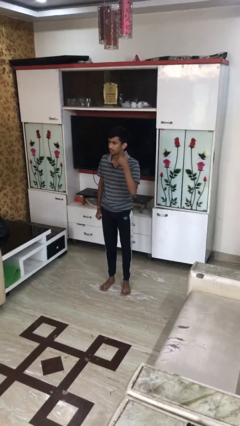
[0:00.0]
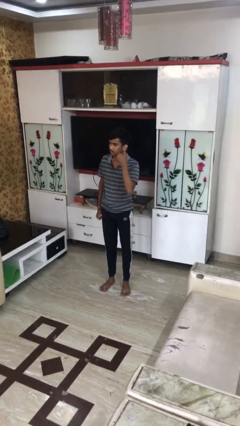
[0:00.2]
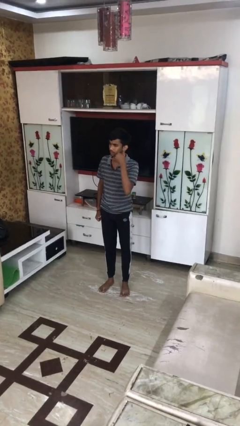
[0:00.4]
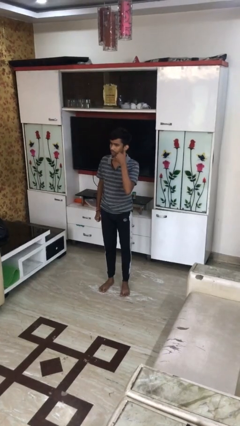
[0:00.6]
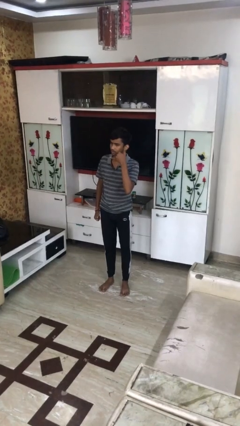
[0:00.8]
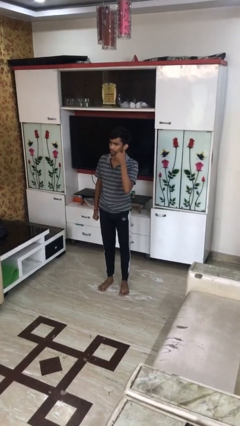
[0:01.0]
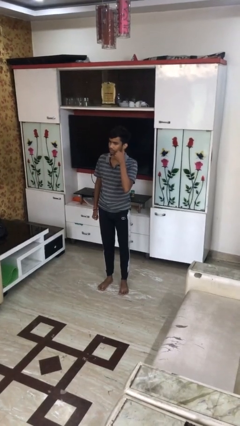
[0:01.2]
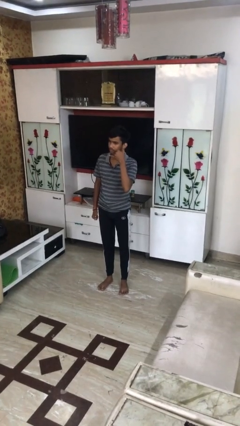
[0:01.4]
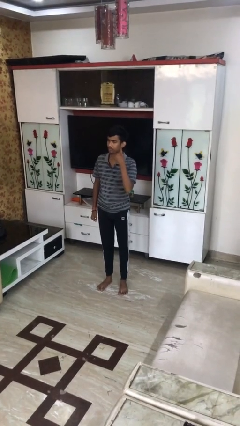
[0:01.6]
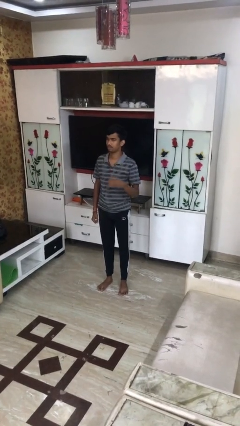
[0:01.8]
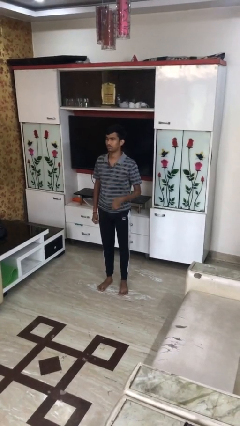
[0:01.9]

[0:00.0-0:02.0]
person gestures call me

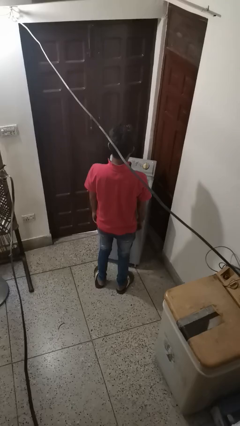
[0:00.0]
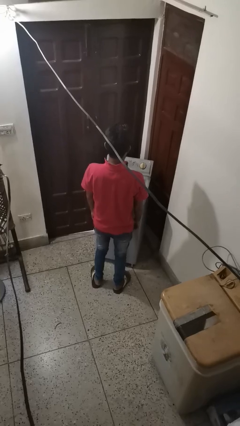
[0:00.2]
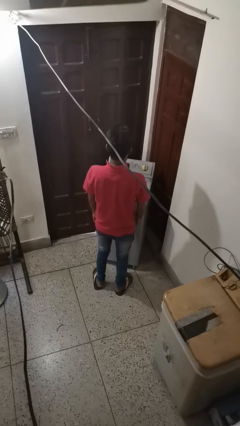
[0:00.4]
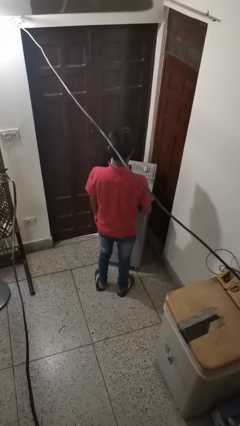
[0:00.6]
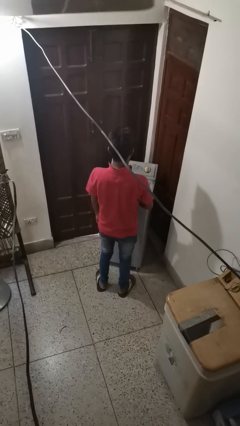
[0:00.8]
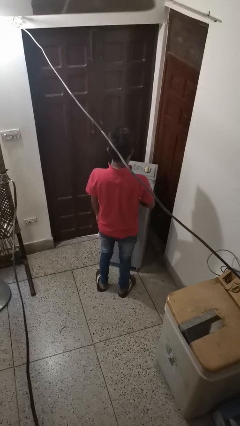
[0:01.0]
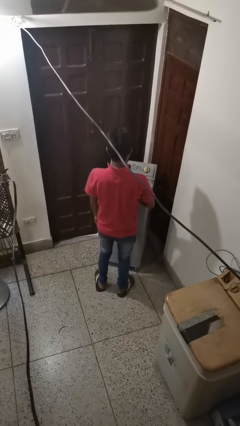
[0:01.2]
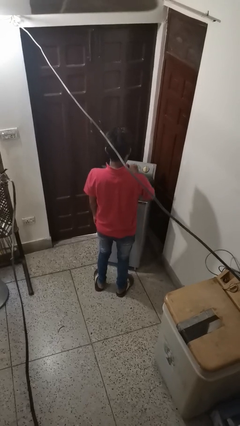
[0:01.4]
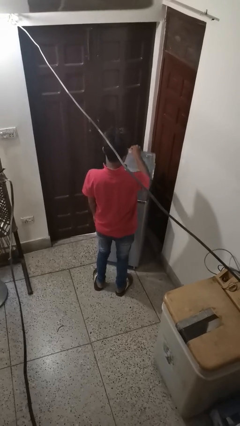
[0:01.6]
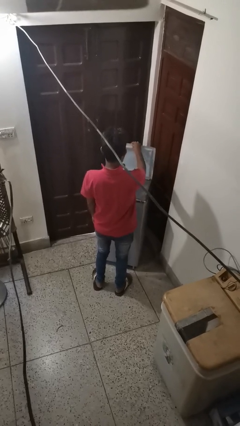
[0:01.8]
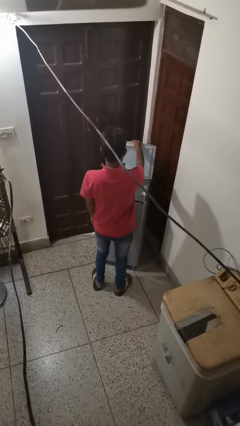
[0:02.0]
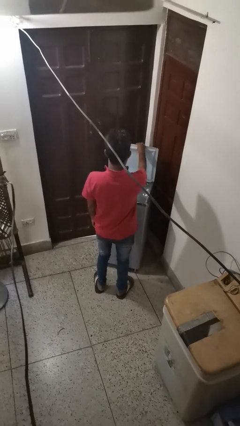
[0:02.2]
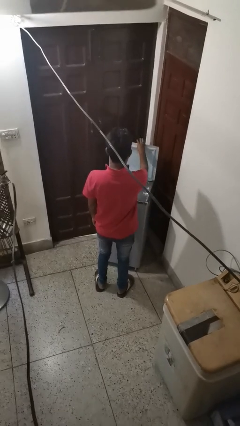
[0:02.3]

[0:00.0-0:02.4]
person opens clothes washer

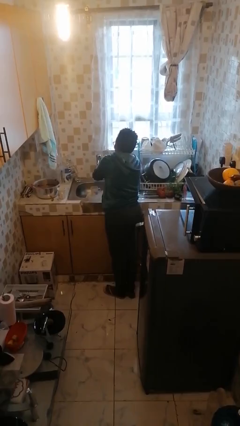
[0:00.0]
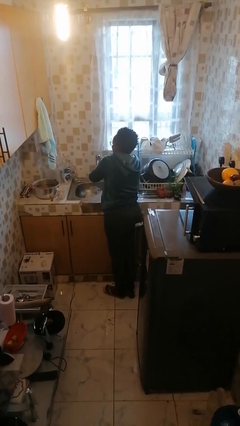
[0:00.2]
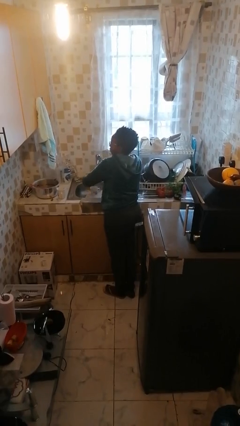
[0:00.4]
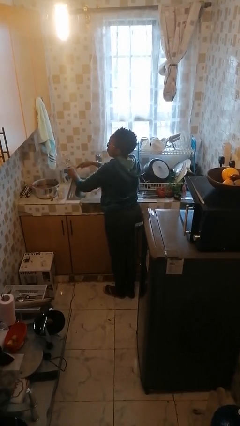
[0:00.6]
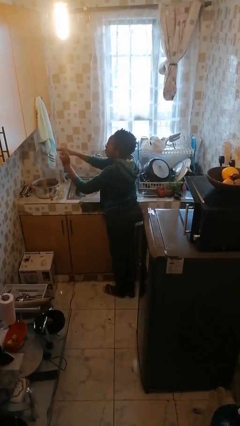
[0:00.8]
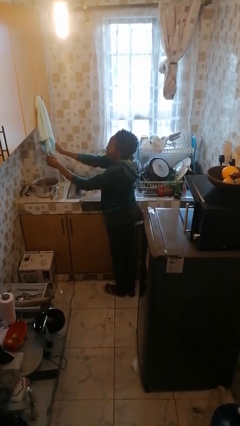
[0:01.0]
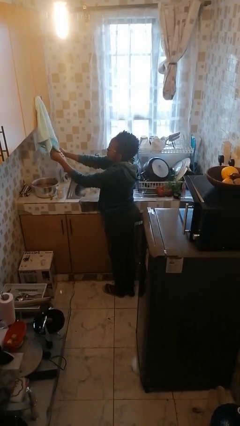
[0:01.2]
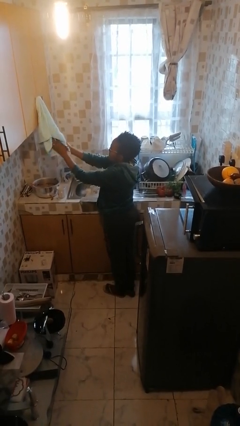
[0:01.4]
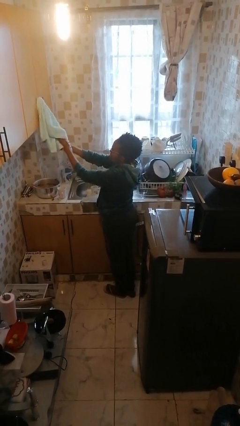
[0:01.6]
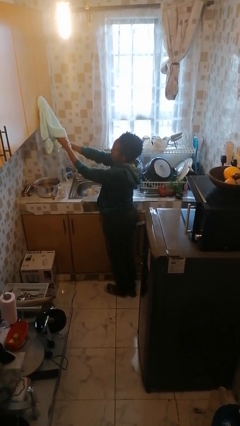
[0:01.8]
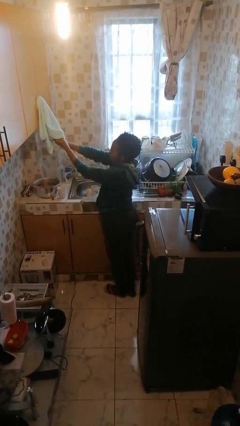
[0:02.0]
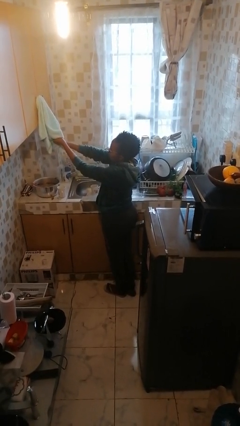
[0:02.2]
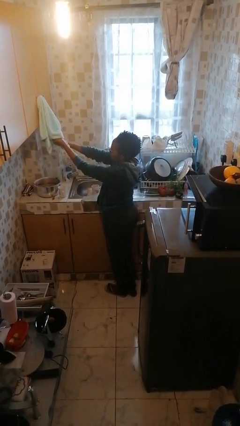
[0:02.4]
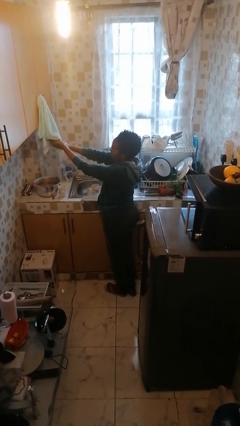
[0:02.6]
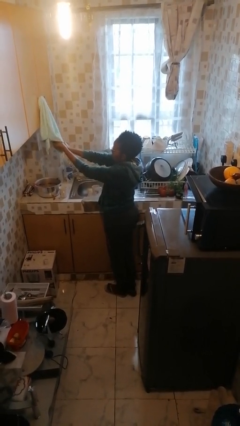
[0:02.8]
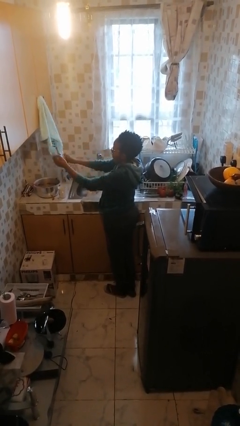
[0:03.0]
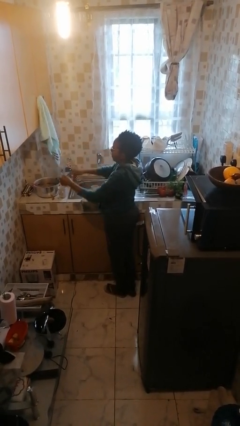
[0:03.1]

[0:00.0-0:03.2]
person dries hands with towel

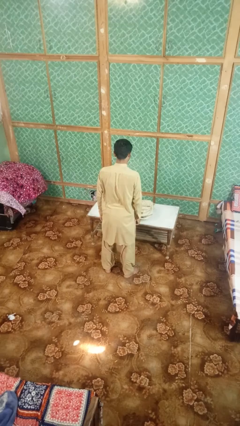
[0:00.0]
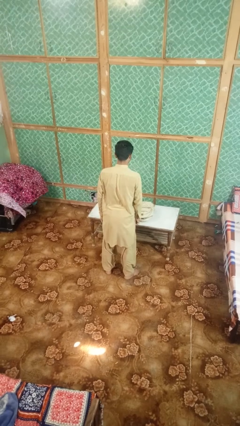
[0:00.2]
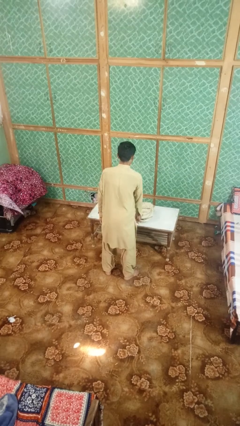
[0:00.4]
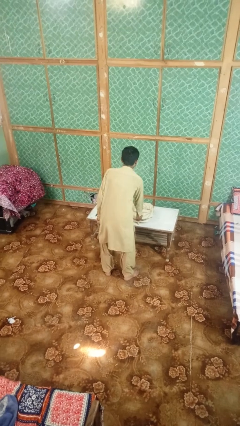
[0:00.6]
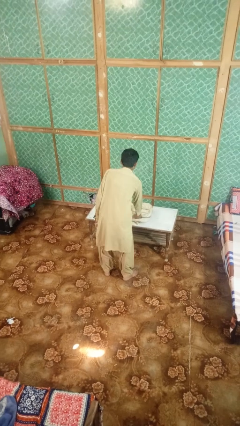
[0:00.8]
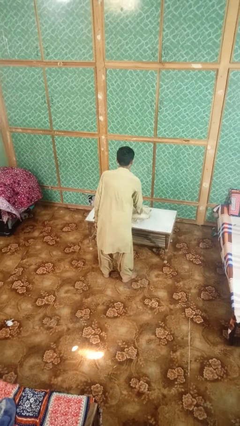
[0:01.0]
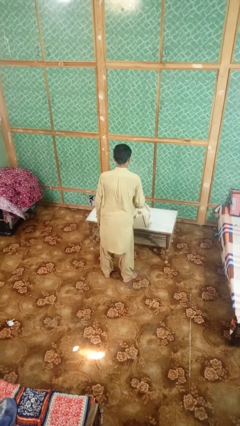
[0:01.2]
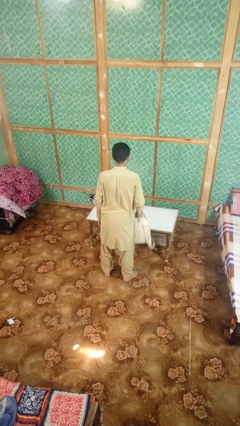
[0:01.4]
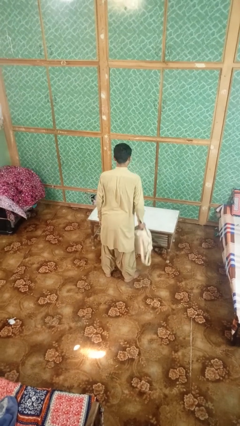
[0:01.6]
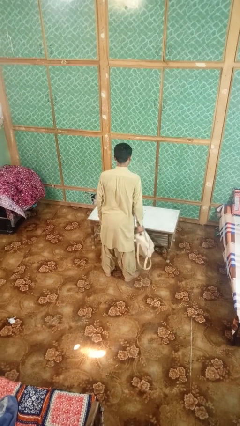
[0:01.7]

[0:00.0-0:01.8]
person picks up object from table

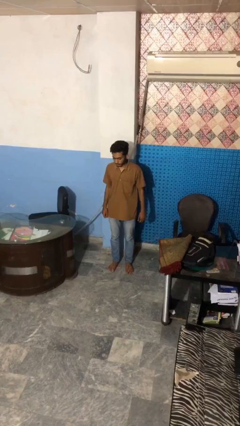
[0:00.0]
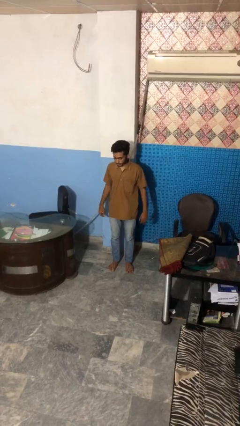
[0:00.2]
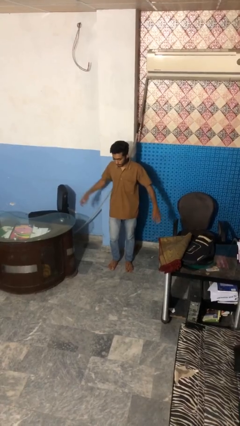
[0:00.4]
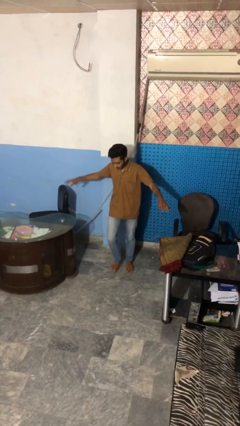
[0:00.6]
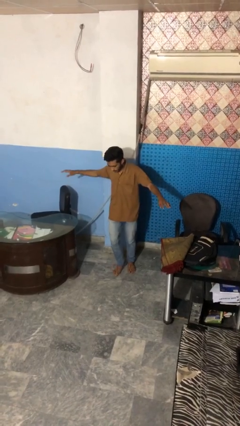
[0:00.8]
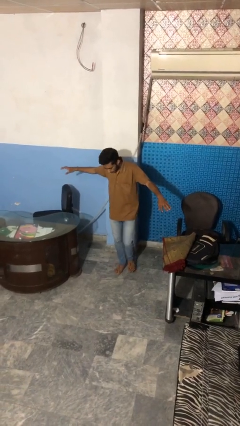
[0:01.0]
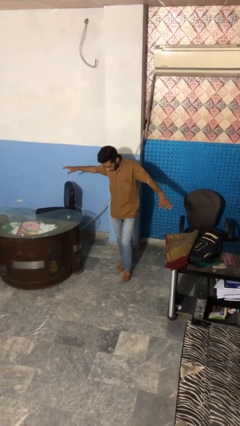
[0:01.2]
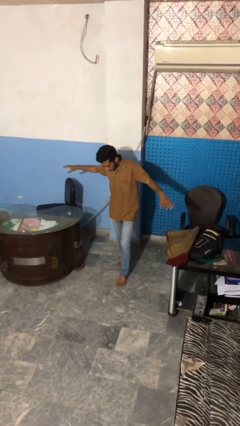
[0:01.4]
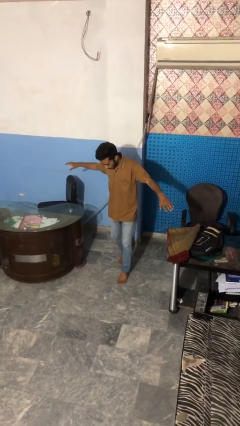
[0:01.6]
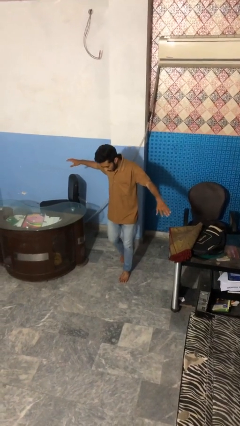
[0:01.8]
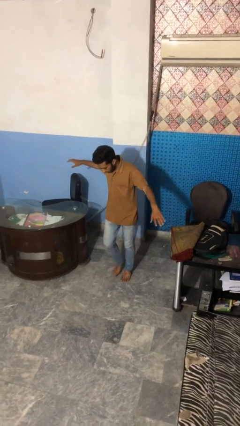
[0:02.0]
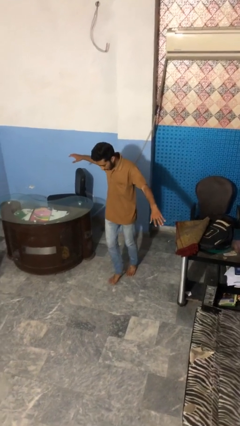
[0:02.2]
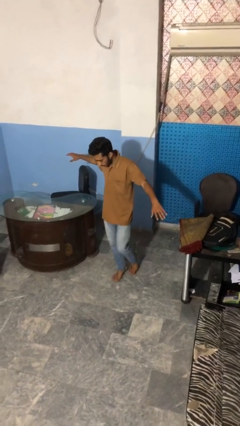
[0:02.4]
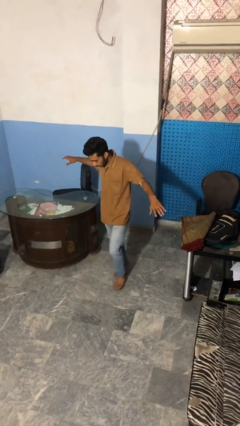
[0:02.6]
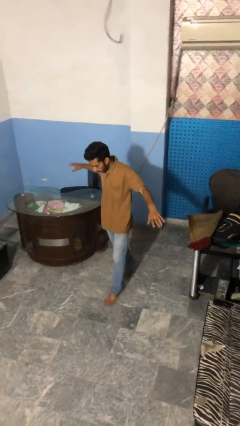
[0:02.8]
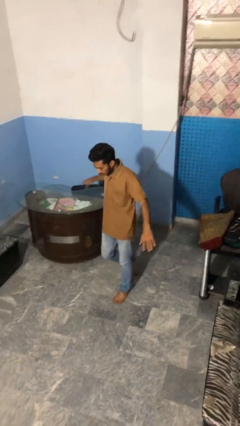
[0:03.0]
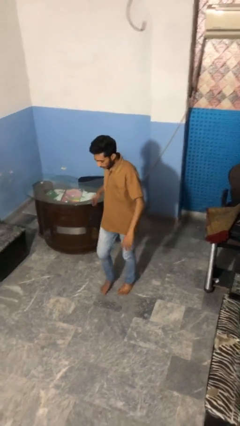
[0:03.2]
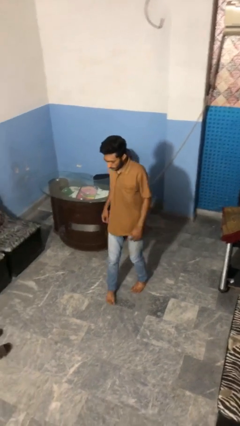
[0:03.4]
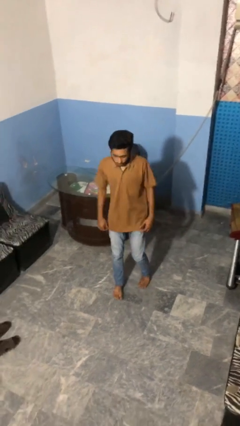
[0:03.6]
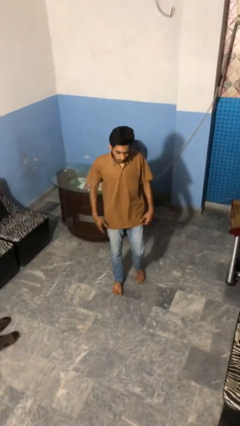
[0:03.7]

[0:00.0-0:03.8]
person walks tiptoe

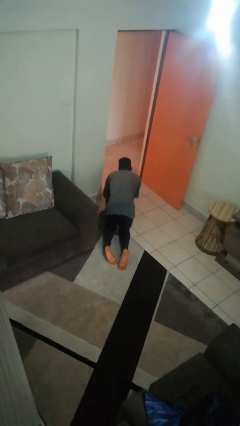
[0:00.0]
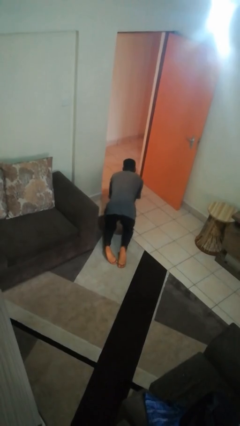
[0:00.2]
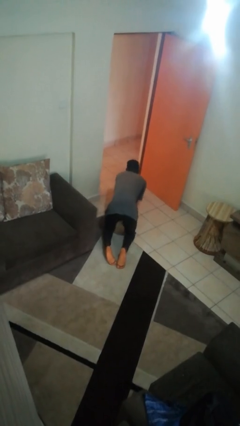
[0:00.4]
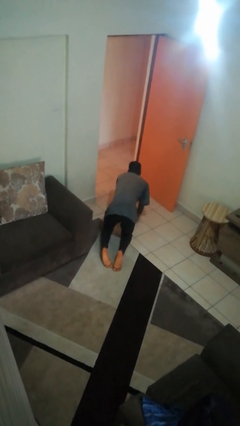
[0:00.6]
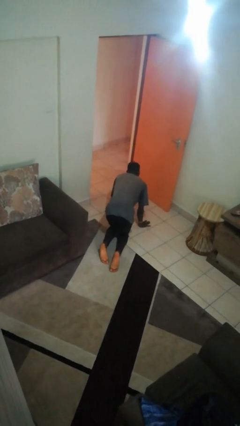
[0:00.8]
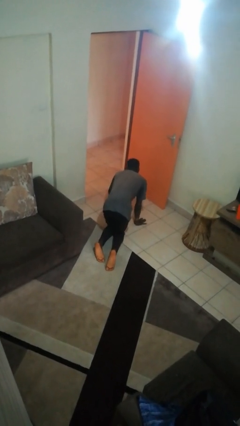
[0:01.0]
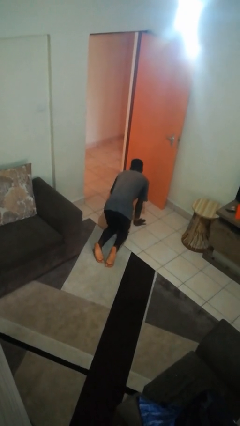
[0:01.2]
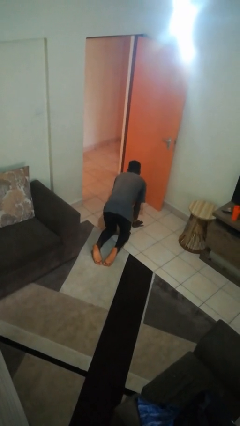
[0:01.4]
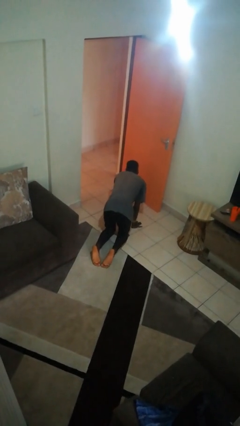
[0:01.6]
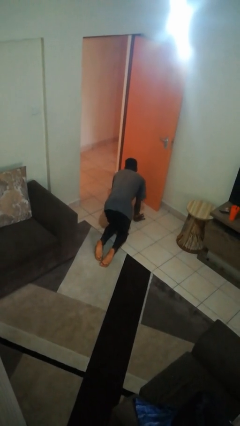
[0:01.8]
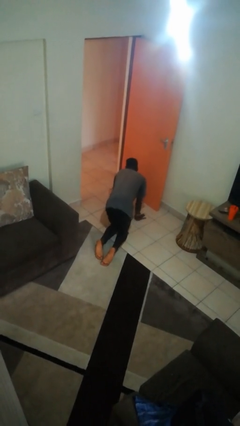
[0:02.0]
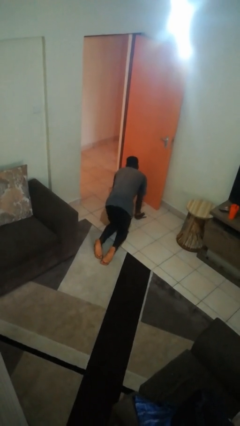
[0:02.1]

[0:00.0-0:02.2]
person crawls

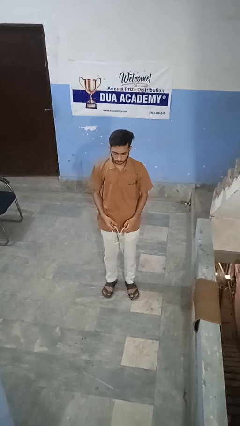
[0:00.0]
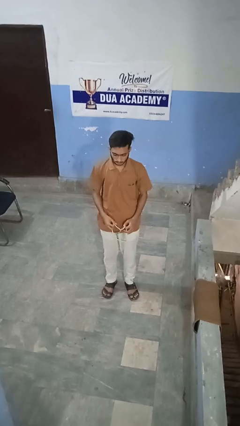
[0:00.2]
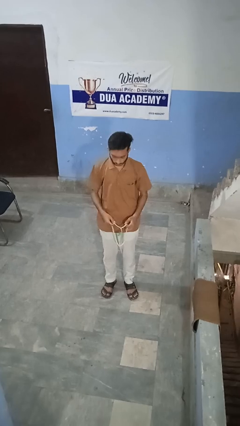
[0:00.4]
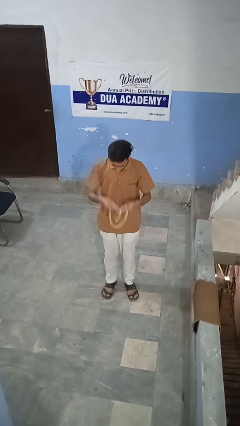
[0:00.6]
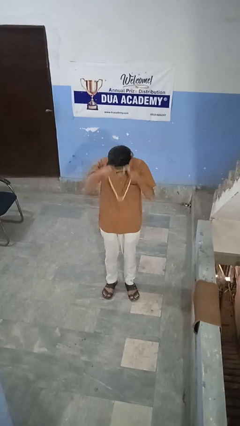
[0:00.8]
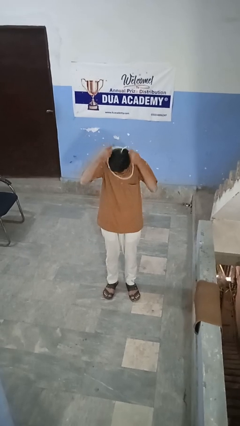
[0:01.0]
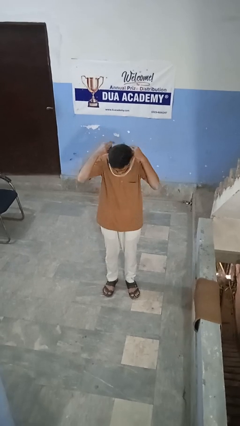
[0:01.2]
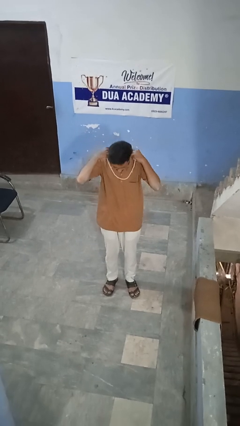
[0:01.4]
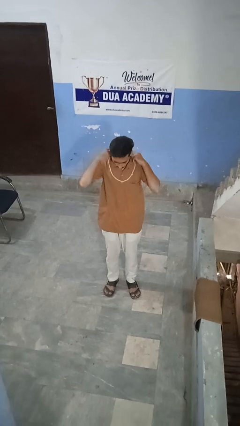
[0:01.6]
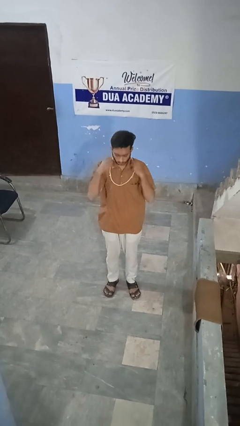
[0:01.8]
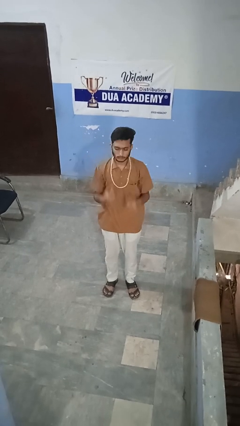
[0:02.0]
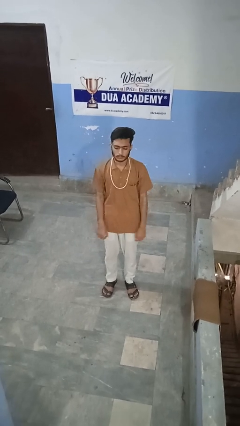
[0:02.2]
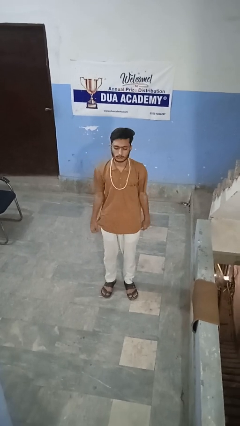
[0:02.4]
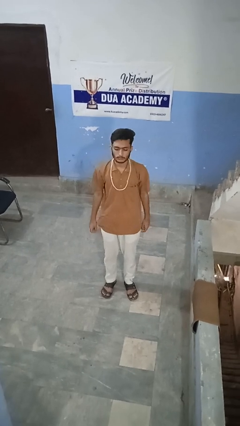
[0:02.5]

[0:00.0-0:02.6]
person puts on necklace
